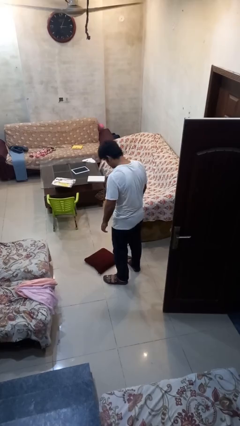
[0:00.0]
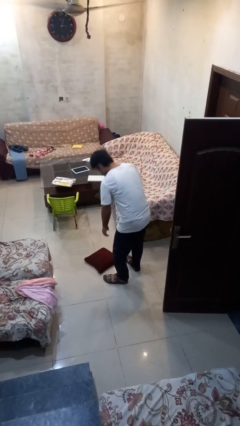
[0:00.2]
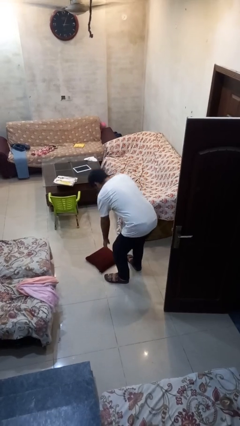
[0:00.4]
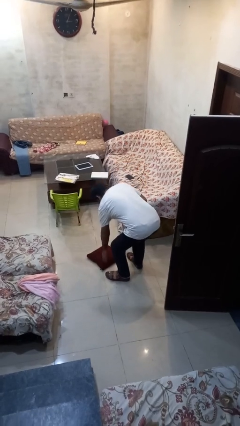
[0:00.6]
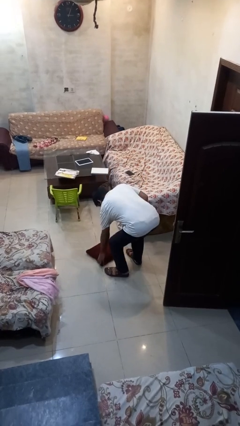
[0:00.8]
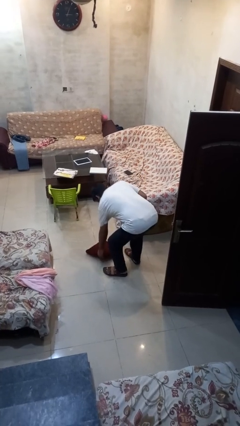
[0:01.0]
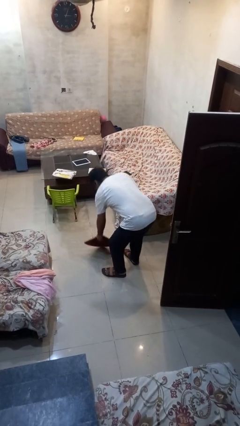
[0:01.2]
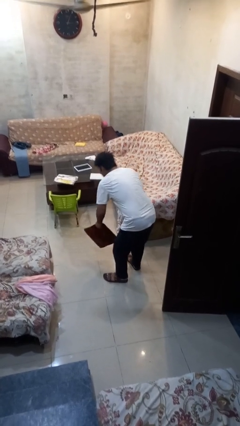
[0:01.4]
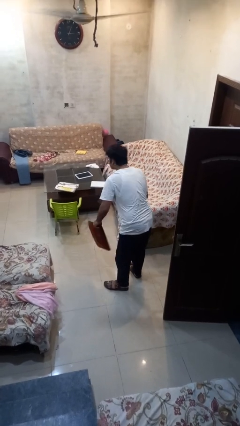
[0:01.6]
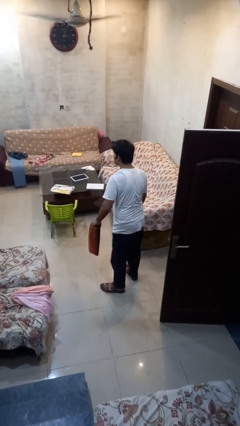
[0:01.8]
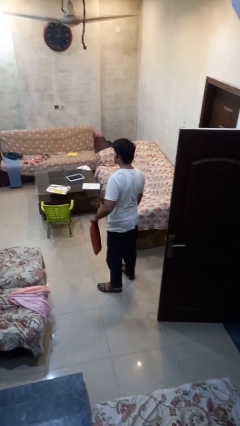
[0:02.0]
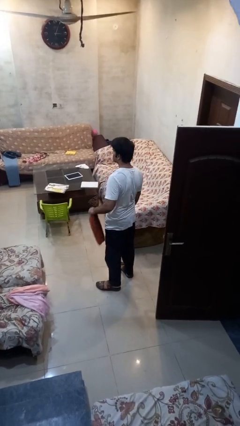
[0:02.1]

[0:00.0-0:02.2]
person picks up object from floor

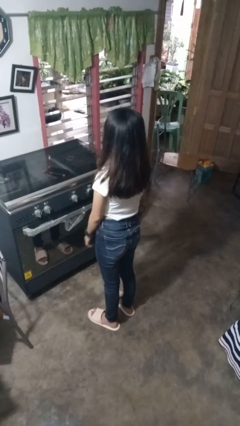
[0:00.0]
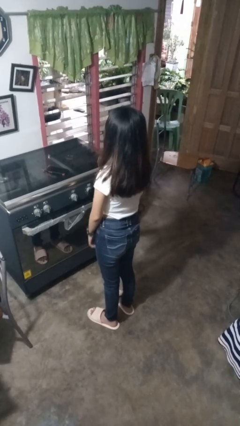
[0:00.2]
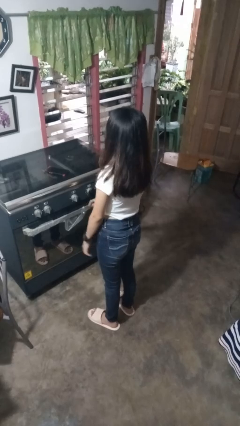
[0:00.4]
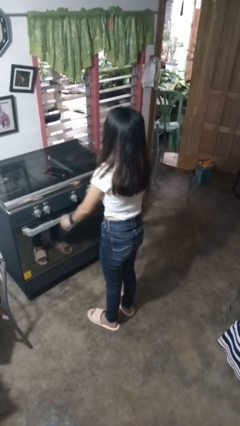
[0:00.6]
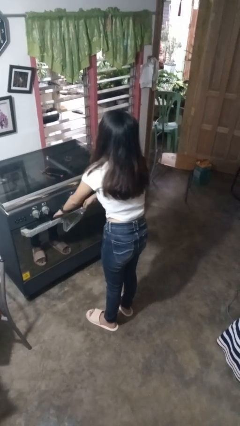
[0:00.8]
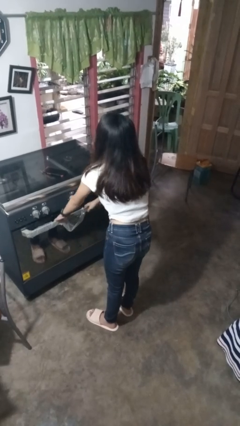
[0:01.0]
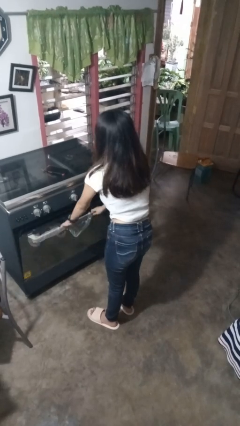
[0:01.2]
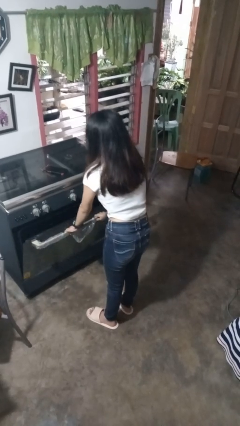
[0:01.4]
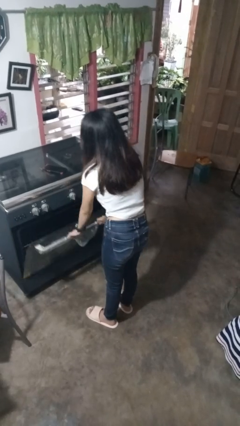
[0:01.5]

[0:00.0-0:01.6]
person opens oven door

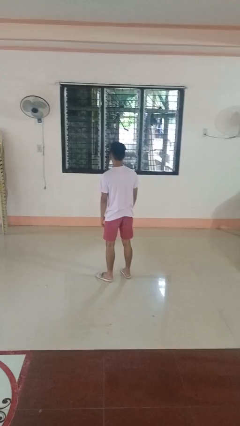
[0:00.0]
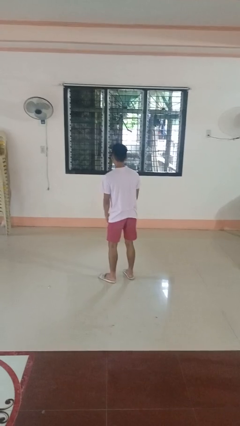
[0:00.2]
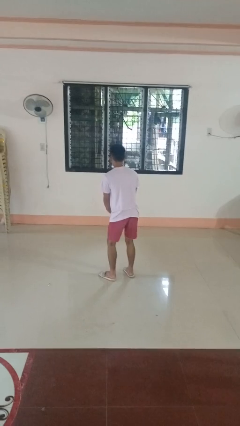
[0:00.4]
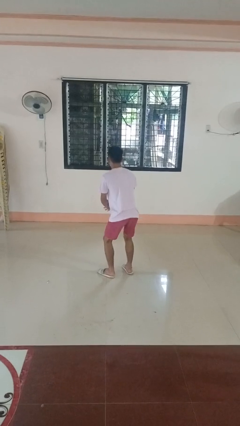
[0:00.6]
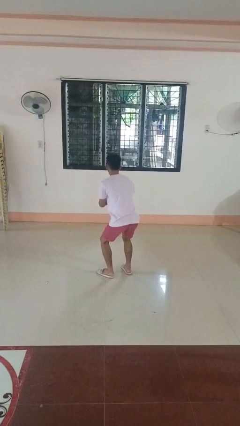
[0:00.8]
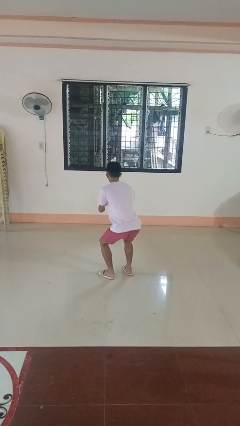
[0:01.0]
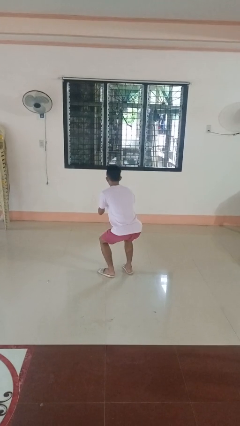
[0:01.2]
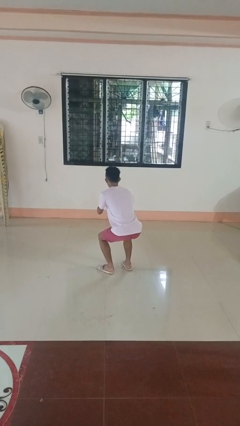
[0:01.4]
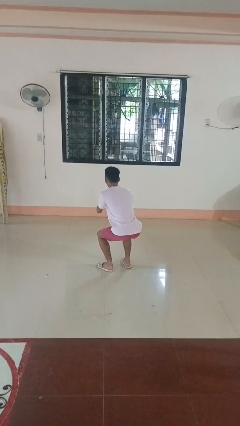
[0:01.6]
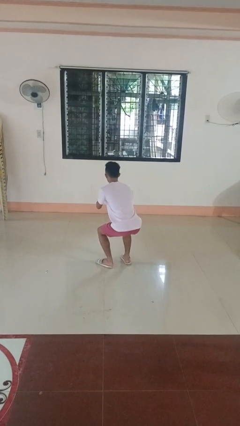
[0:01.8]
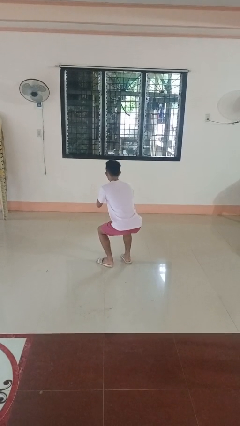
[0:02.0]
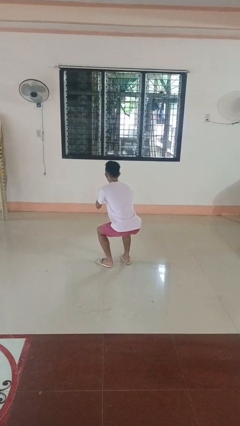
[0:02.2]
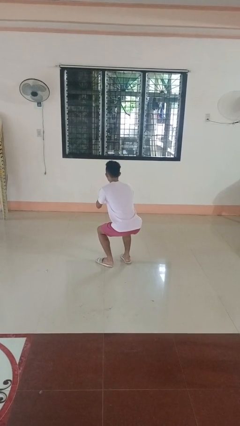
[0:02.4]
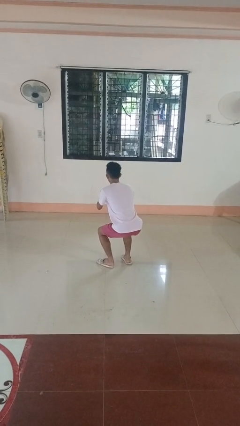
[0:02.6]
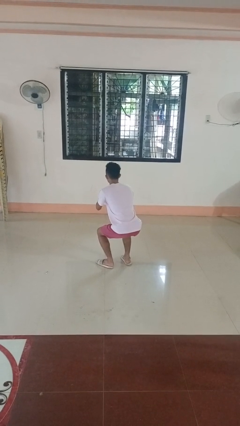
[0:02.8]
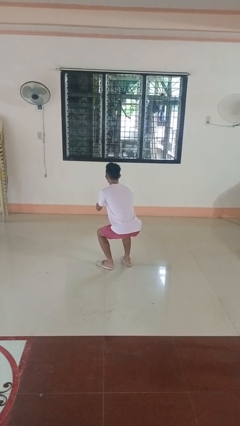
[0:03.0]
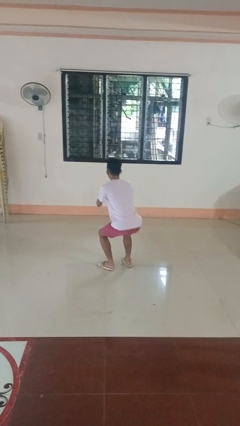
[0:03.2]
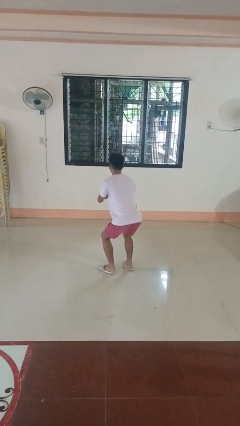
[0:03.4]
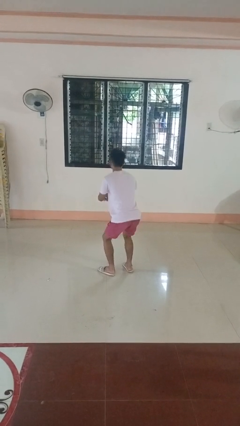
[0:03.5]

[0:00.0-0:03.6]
person squats

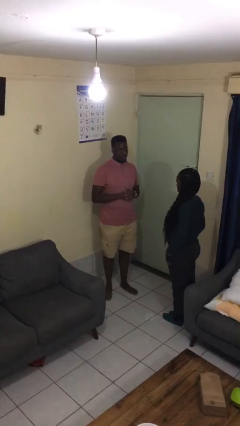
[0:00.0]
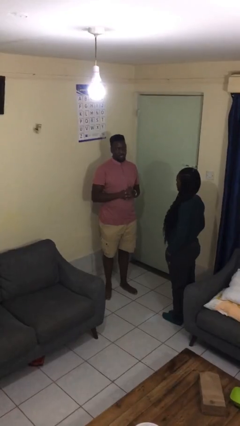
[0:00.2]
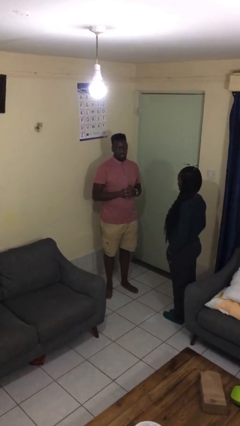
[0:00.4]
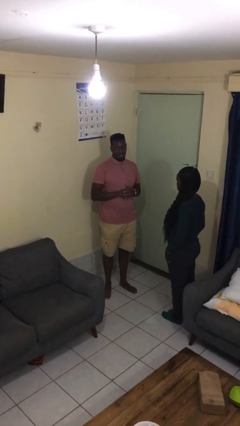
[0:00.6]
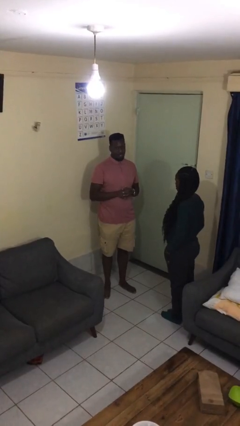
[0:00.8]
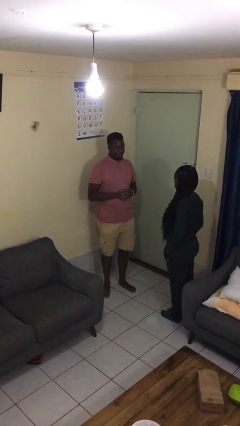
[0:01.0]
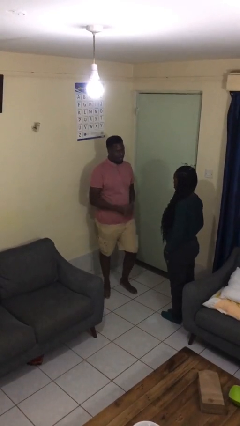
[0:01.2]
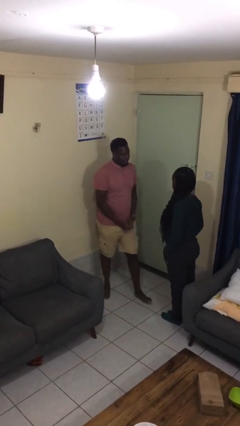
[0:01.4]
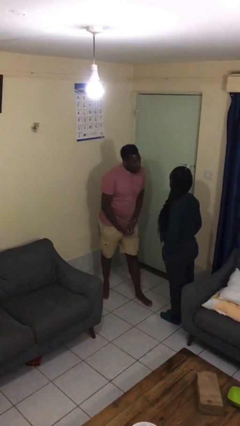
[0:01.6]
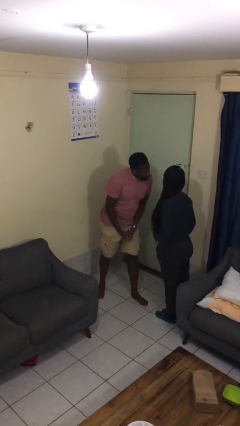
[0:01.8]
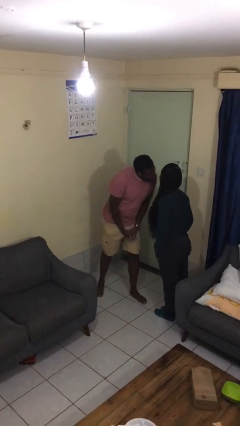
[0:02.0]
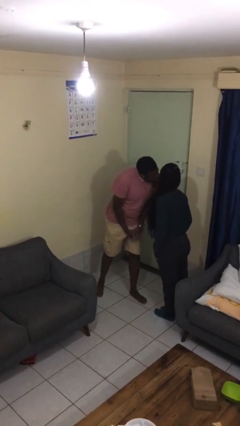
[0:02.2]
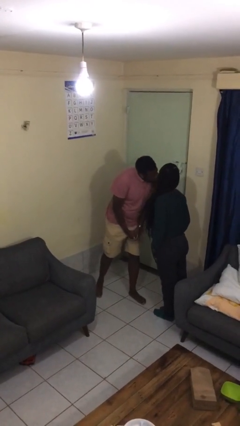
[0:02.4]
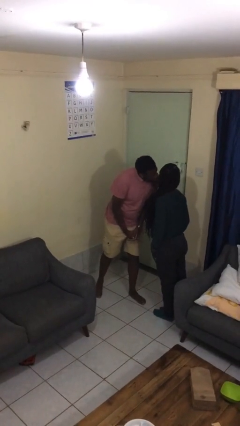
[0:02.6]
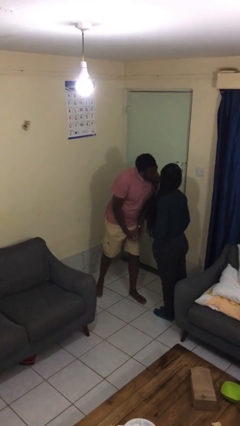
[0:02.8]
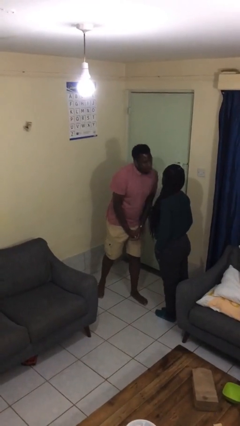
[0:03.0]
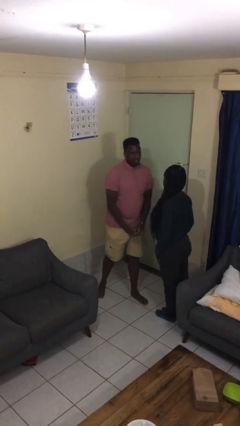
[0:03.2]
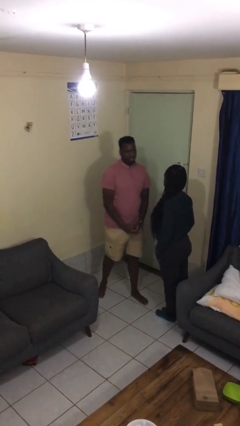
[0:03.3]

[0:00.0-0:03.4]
person kisses cheek of person

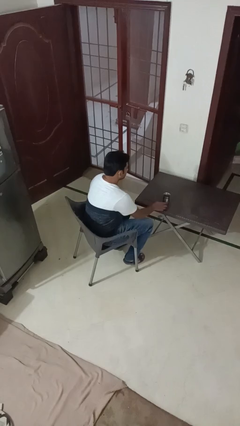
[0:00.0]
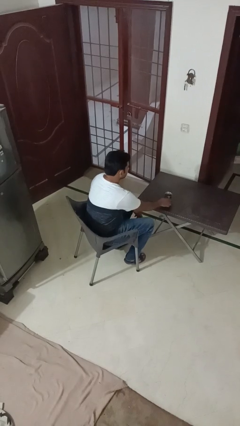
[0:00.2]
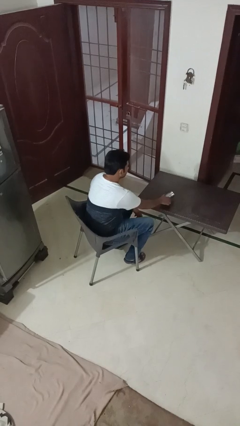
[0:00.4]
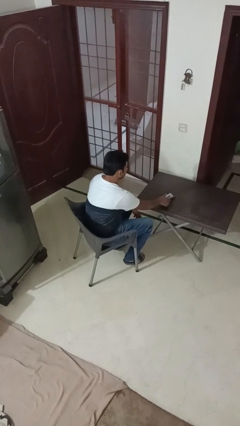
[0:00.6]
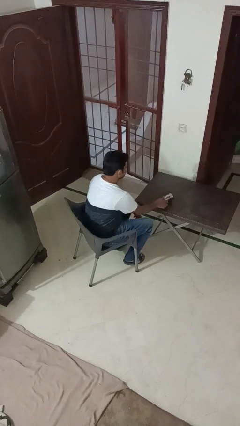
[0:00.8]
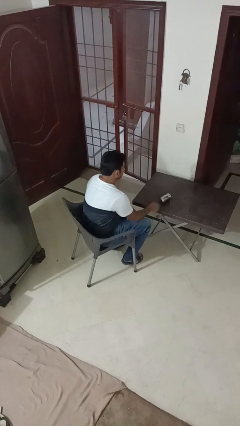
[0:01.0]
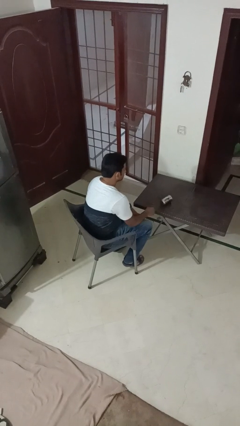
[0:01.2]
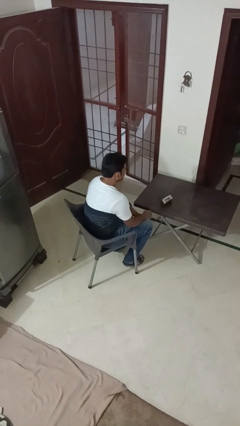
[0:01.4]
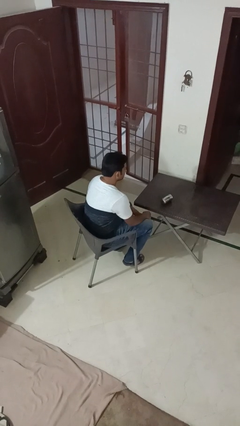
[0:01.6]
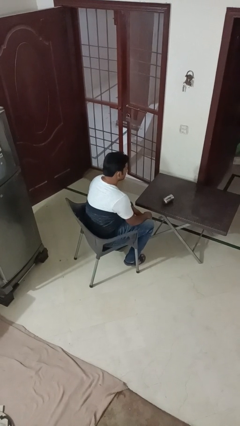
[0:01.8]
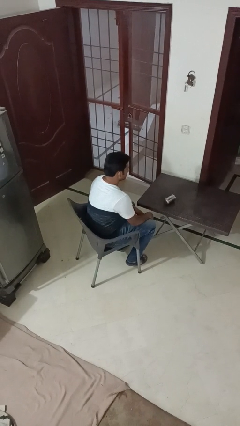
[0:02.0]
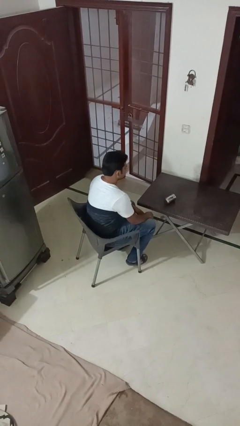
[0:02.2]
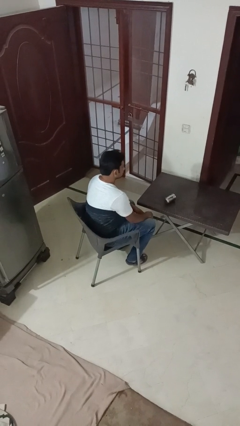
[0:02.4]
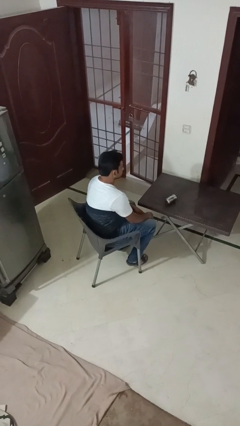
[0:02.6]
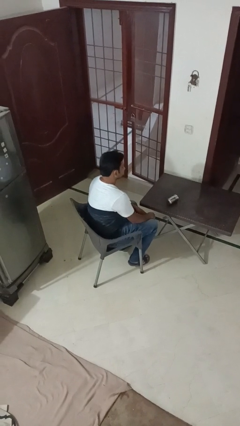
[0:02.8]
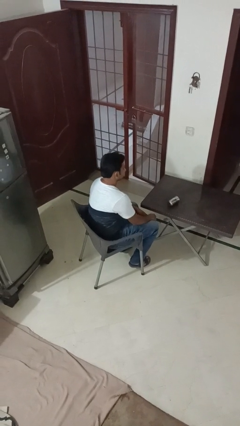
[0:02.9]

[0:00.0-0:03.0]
person spills on table

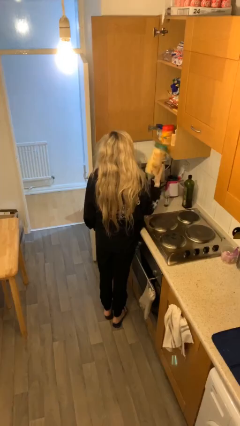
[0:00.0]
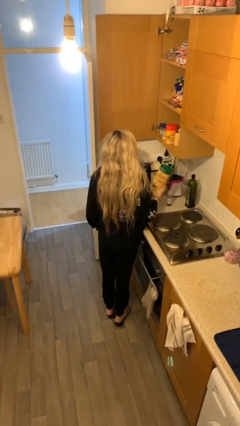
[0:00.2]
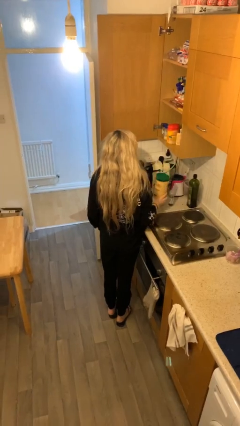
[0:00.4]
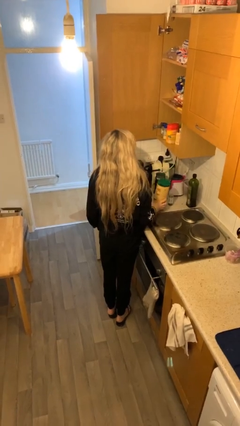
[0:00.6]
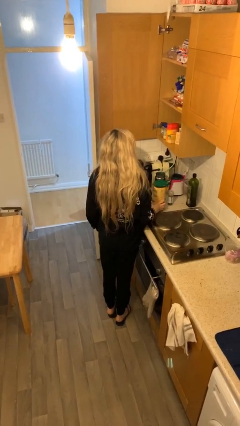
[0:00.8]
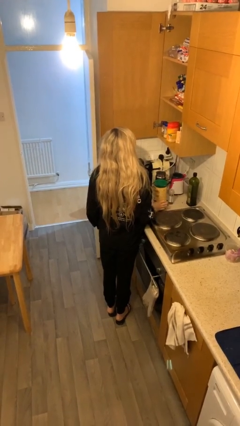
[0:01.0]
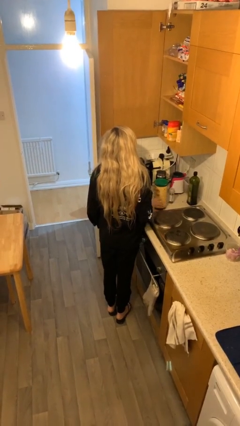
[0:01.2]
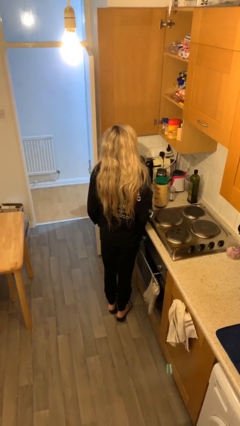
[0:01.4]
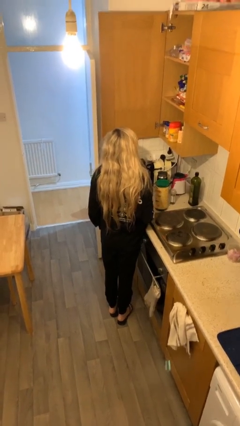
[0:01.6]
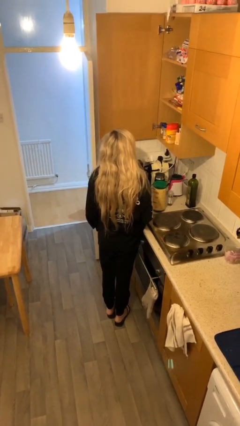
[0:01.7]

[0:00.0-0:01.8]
person puts down object on table

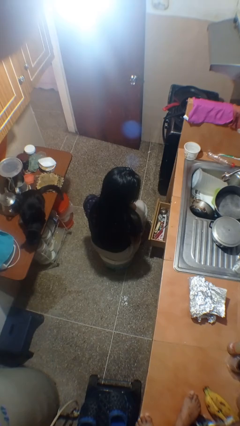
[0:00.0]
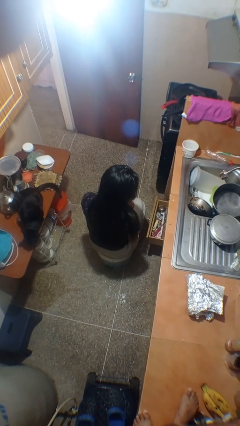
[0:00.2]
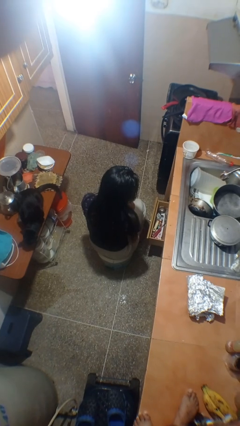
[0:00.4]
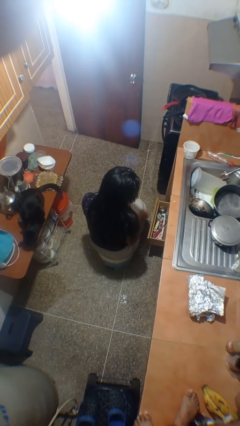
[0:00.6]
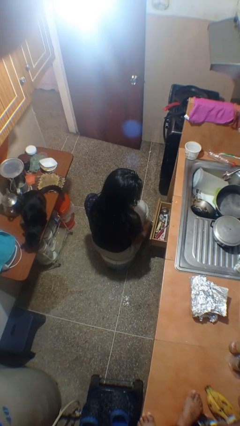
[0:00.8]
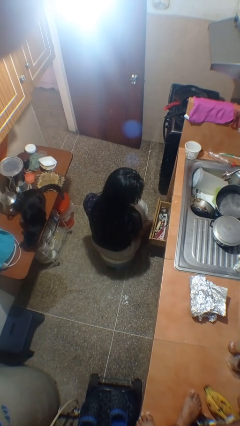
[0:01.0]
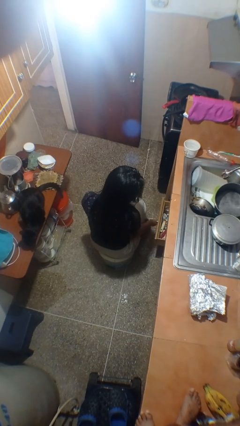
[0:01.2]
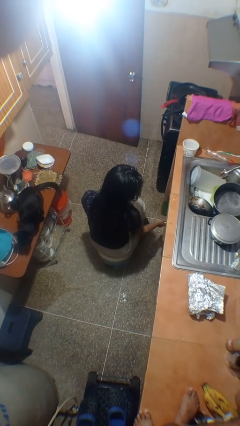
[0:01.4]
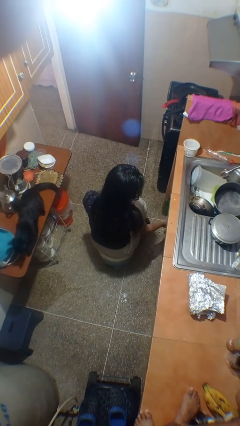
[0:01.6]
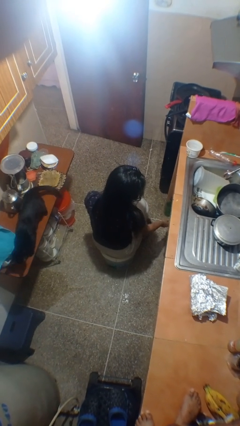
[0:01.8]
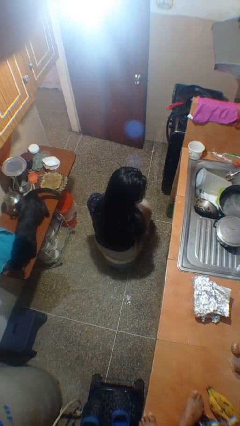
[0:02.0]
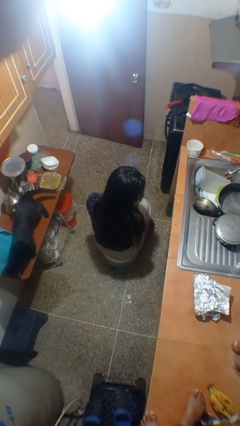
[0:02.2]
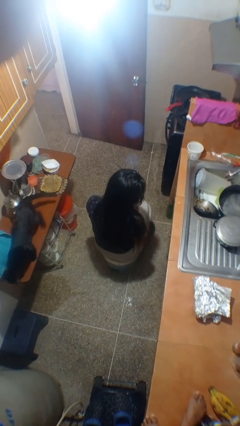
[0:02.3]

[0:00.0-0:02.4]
person closes kitchen drawer
